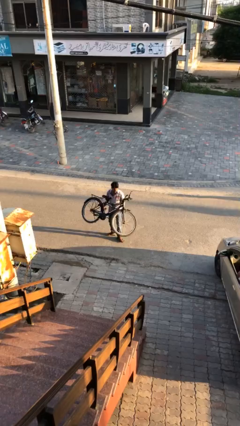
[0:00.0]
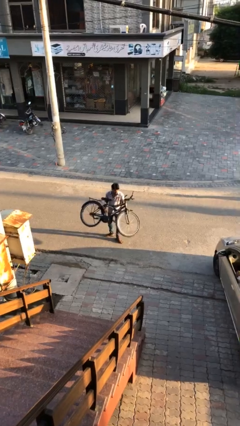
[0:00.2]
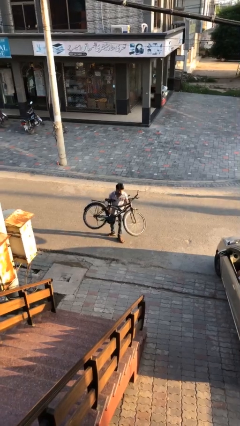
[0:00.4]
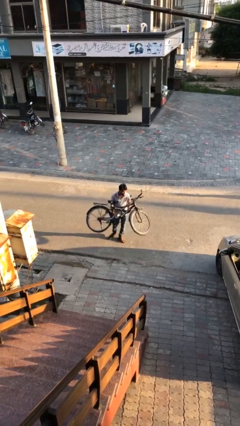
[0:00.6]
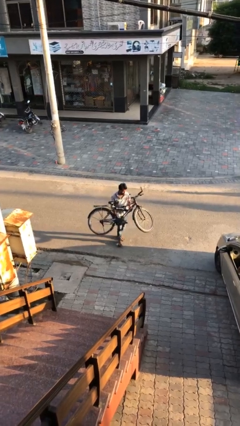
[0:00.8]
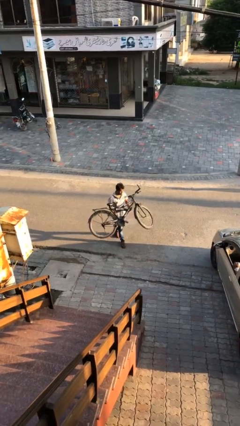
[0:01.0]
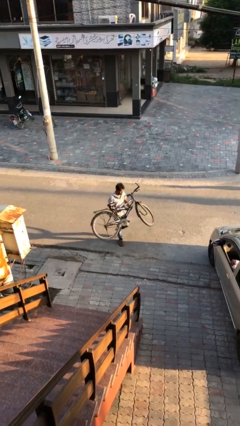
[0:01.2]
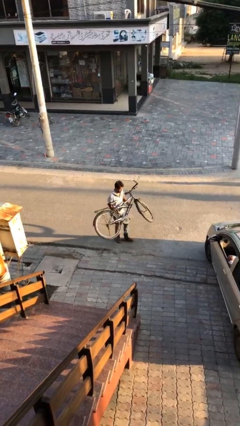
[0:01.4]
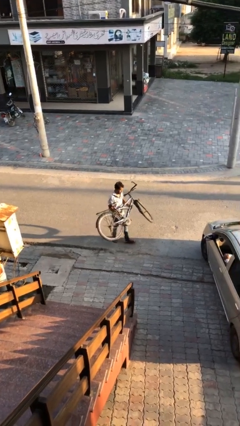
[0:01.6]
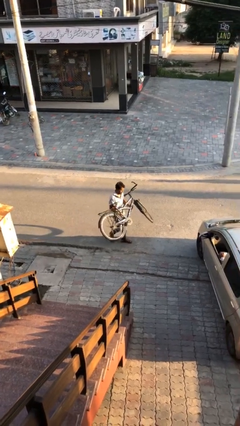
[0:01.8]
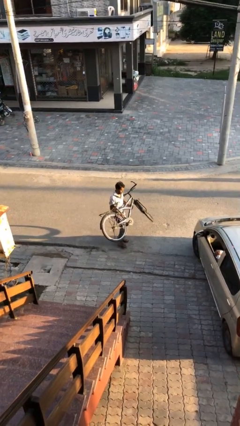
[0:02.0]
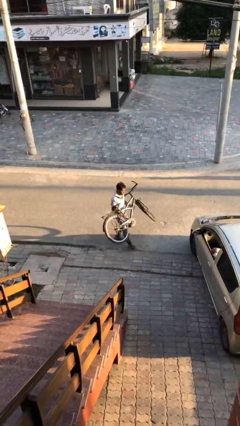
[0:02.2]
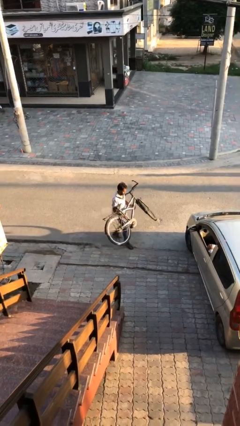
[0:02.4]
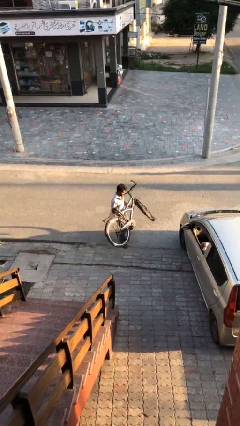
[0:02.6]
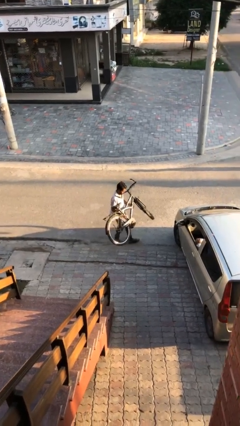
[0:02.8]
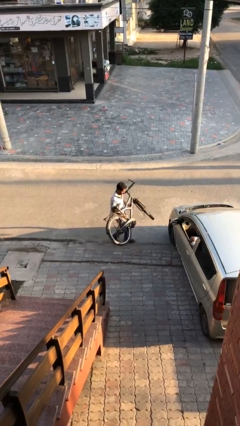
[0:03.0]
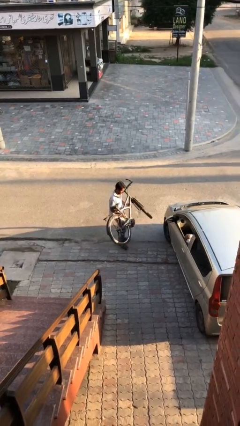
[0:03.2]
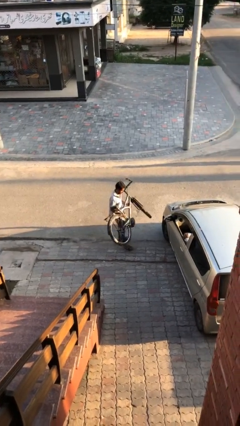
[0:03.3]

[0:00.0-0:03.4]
person carries heavy object

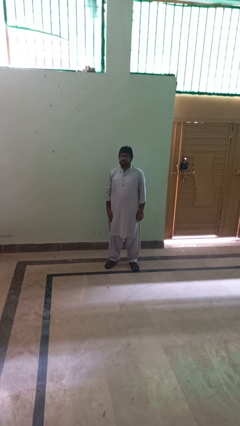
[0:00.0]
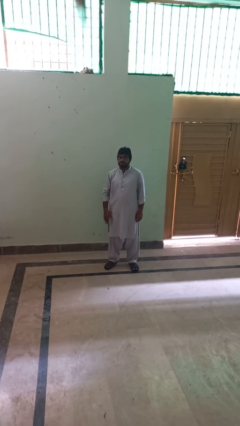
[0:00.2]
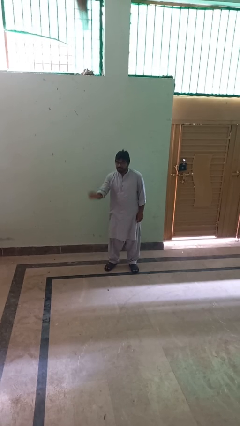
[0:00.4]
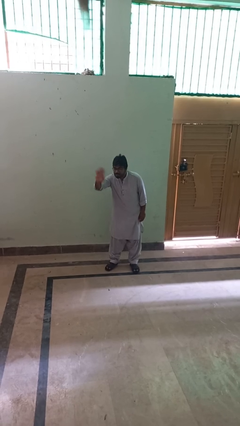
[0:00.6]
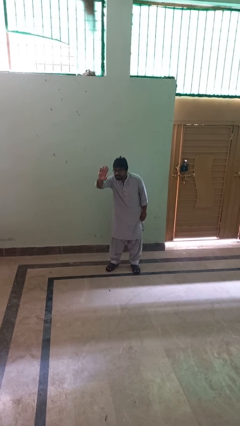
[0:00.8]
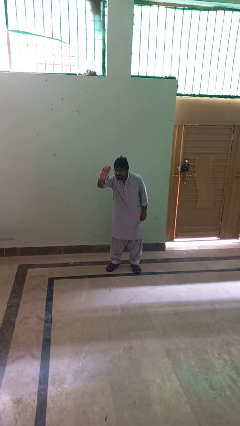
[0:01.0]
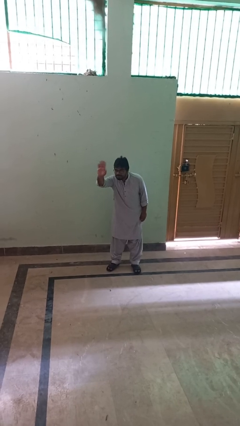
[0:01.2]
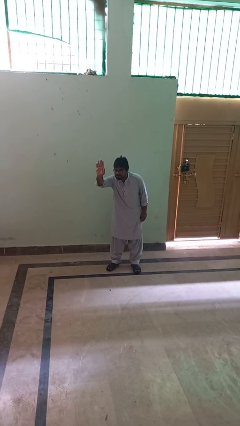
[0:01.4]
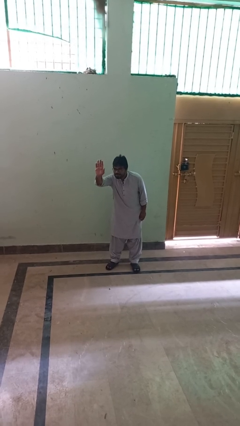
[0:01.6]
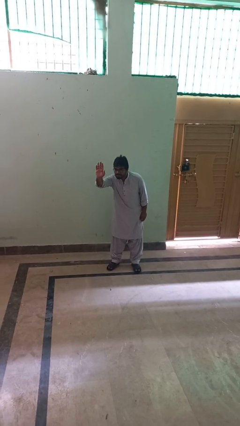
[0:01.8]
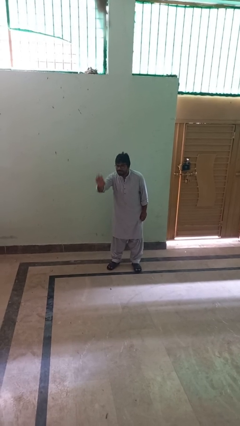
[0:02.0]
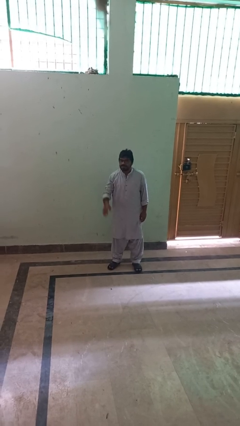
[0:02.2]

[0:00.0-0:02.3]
person waves at person

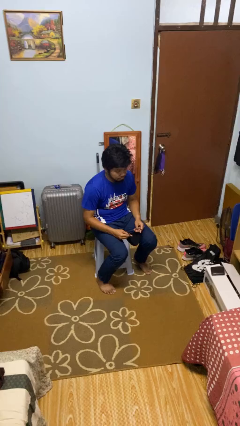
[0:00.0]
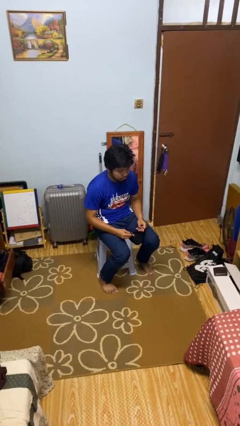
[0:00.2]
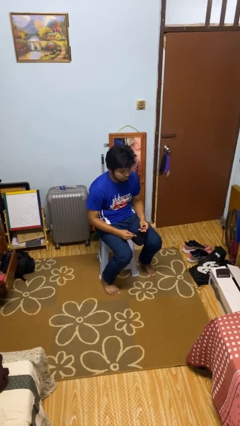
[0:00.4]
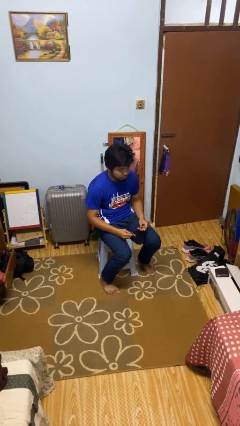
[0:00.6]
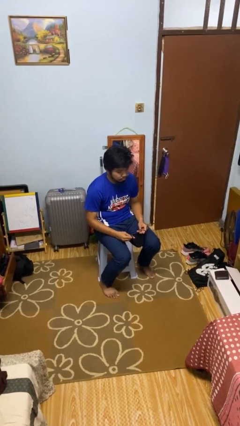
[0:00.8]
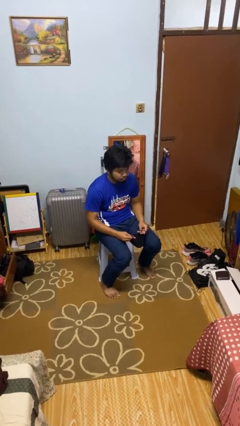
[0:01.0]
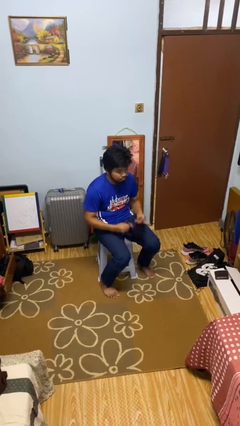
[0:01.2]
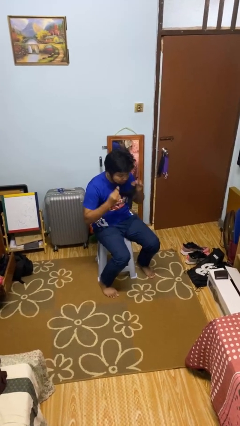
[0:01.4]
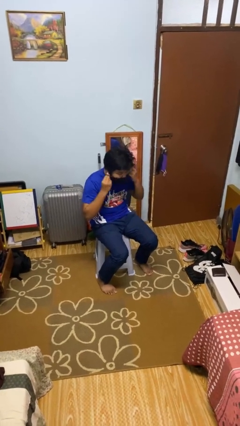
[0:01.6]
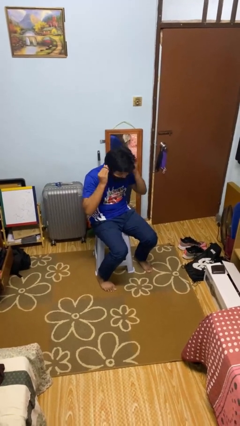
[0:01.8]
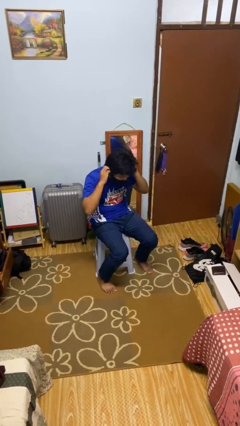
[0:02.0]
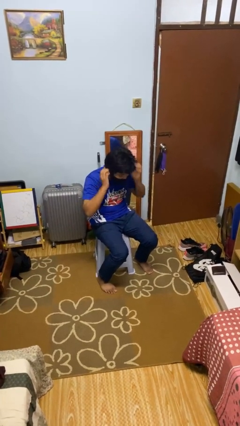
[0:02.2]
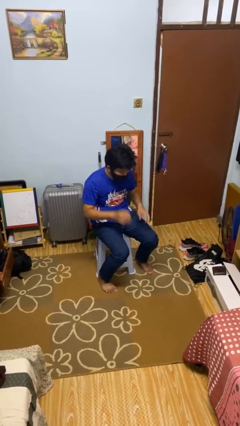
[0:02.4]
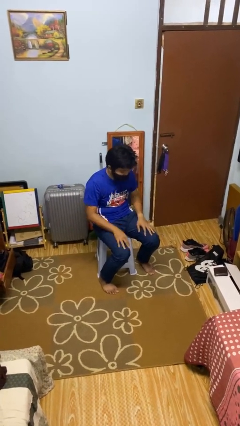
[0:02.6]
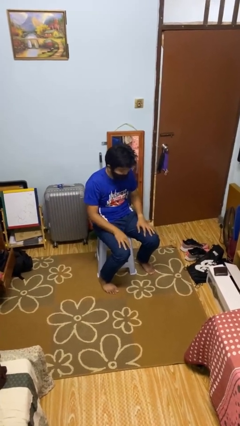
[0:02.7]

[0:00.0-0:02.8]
person puts on facemask

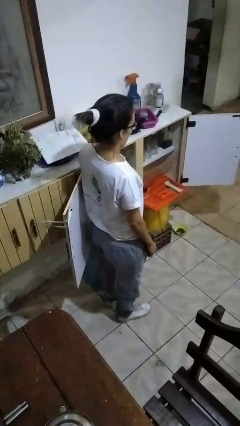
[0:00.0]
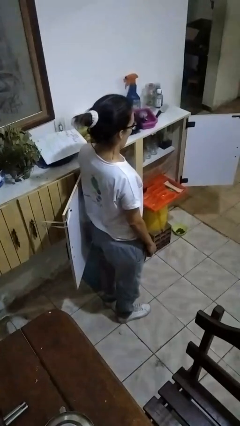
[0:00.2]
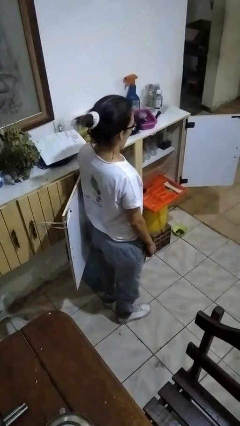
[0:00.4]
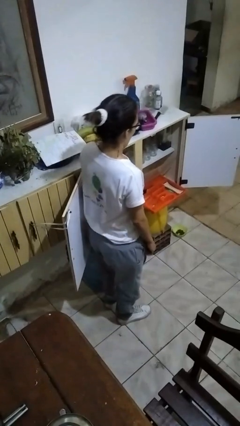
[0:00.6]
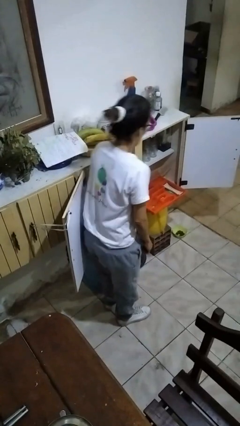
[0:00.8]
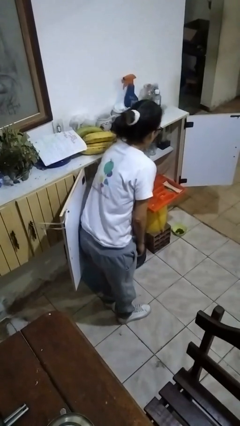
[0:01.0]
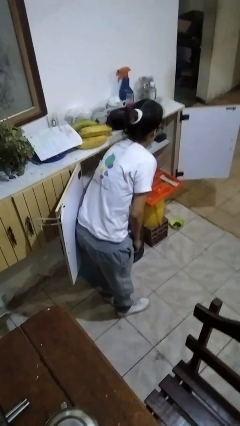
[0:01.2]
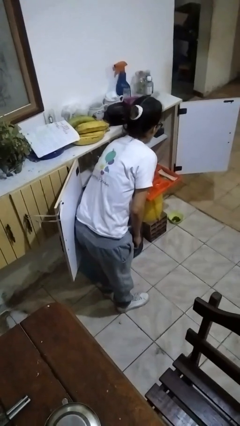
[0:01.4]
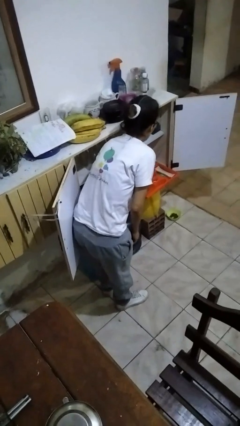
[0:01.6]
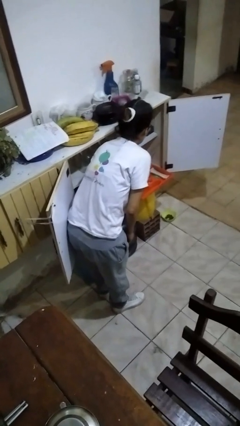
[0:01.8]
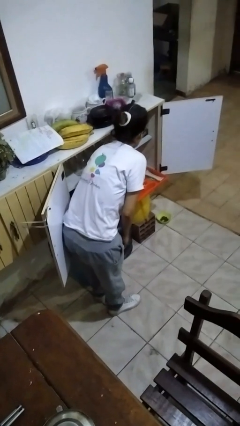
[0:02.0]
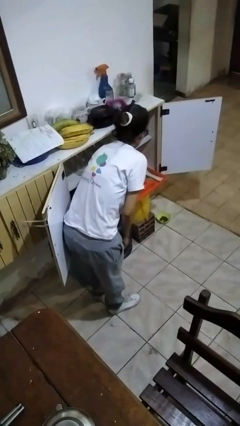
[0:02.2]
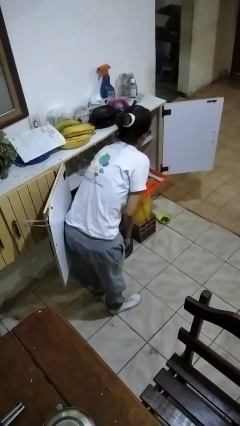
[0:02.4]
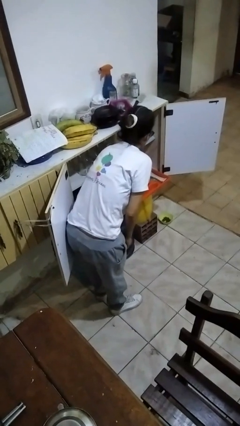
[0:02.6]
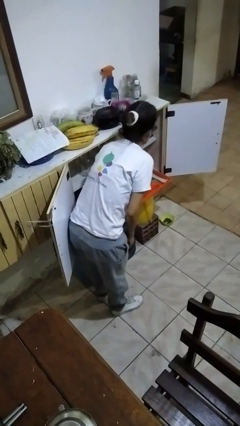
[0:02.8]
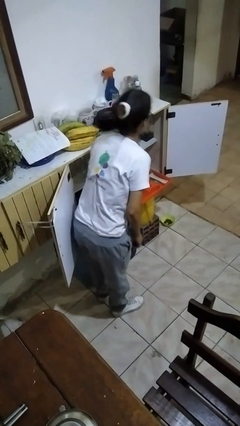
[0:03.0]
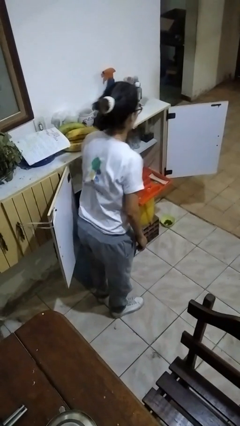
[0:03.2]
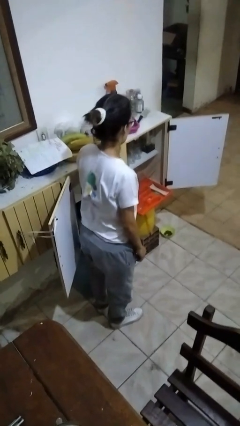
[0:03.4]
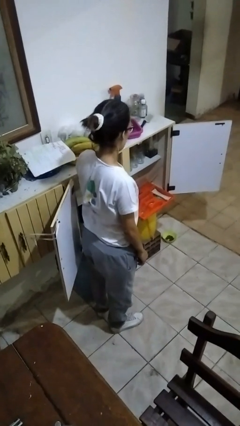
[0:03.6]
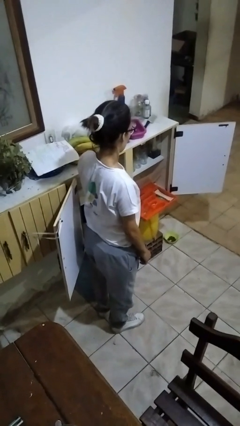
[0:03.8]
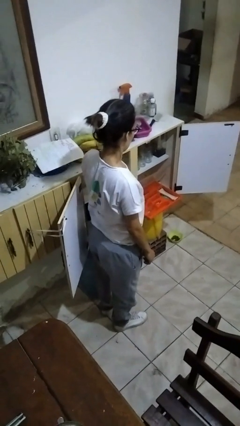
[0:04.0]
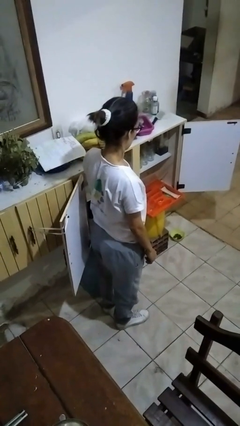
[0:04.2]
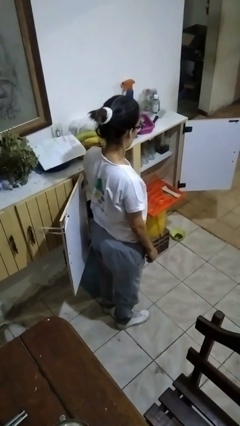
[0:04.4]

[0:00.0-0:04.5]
person searches in kitchen drawer

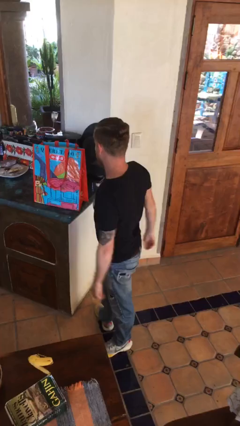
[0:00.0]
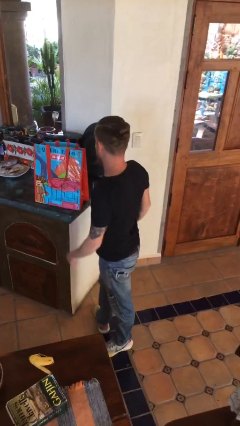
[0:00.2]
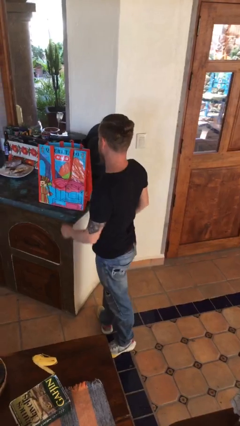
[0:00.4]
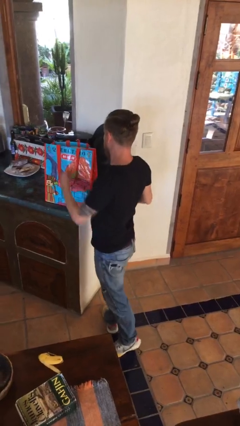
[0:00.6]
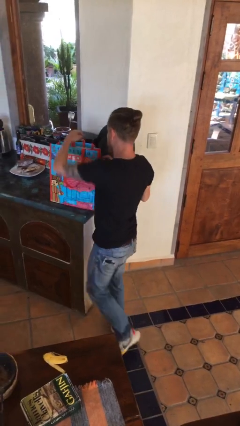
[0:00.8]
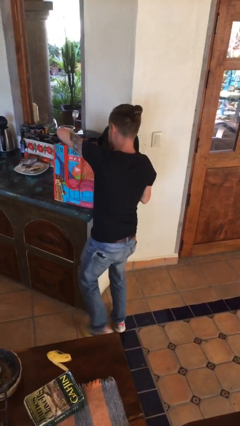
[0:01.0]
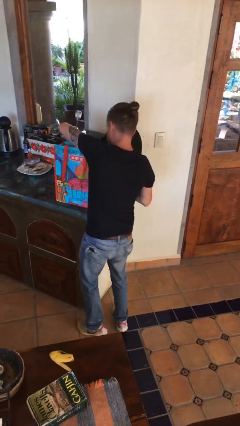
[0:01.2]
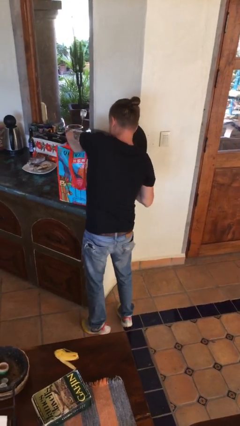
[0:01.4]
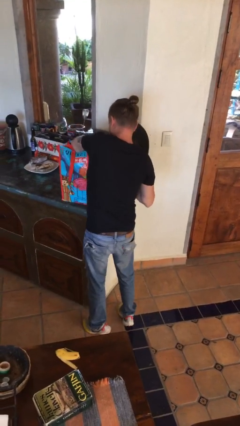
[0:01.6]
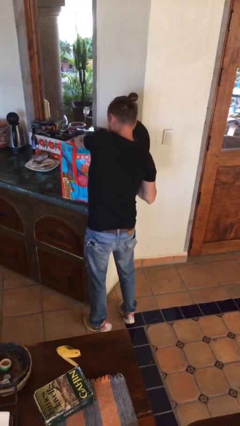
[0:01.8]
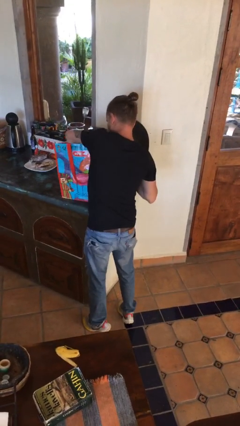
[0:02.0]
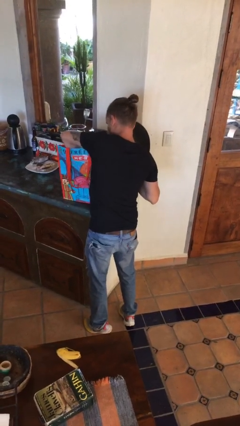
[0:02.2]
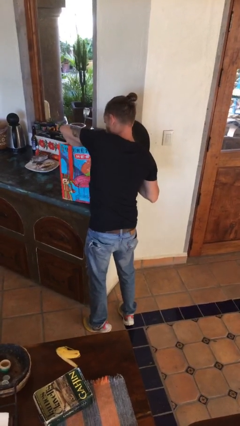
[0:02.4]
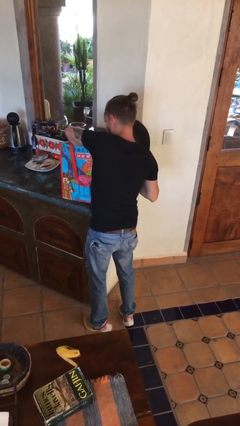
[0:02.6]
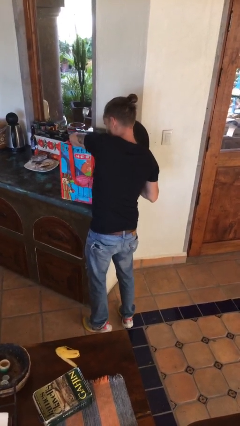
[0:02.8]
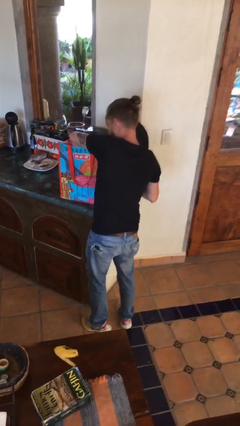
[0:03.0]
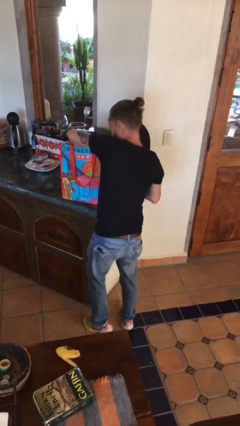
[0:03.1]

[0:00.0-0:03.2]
person searches in bag

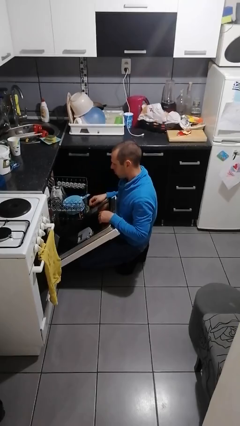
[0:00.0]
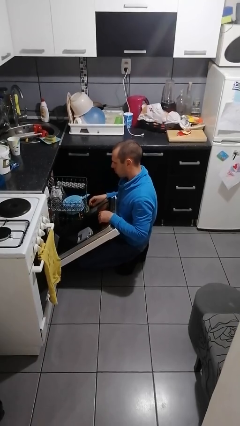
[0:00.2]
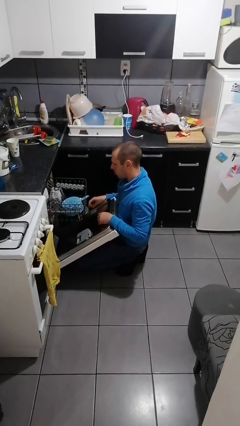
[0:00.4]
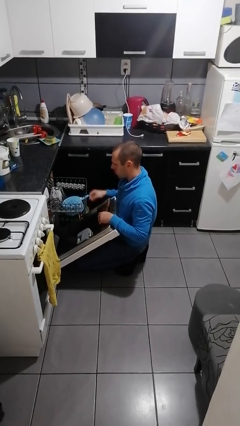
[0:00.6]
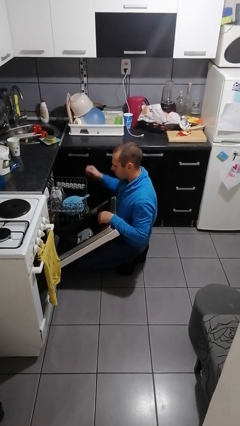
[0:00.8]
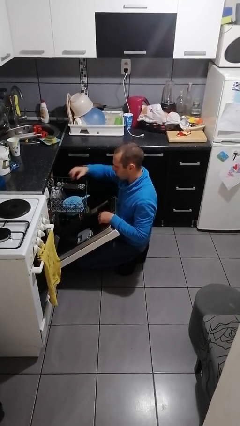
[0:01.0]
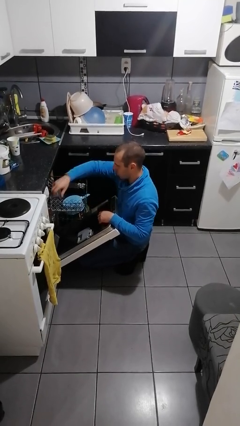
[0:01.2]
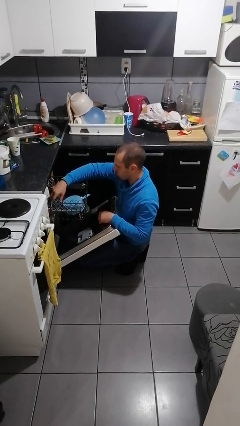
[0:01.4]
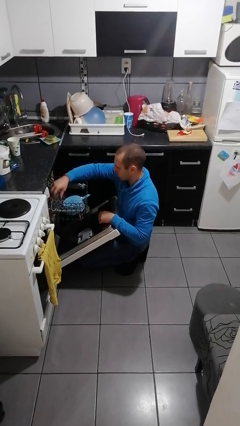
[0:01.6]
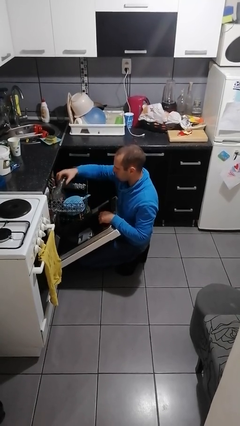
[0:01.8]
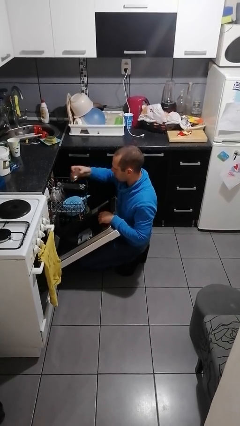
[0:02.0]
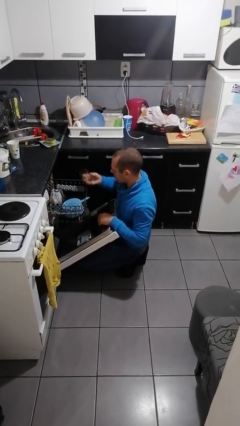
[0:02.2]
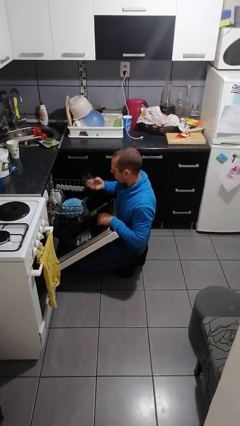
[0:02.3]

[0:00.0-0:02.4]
person unloads dishwasher
